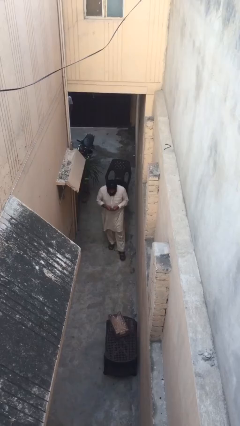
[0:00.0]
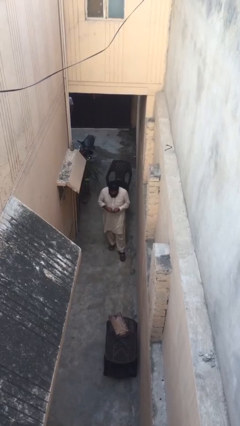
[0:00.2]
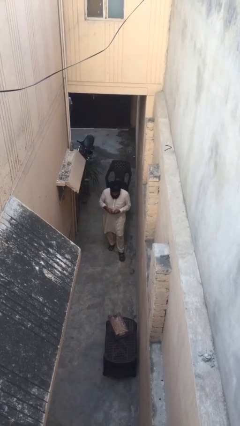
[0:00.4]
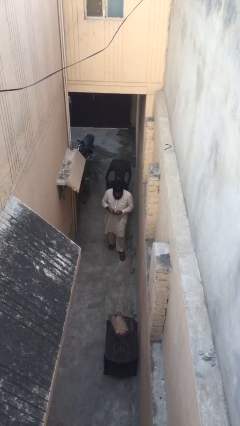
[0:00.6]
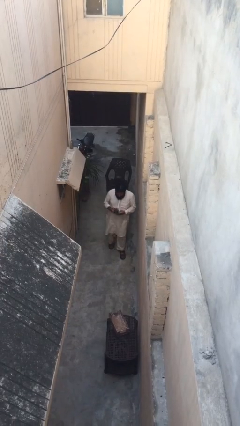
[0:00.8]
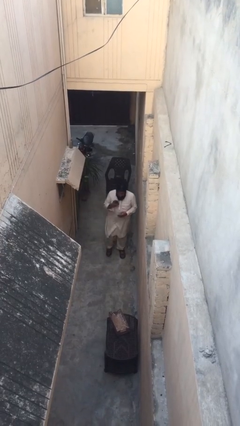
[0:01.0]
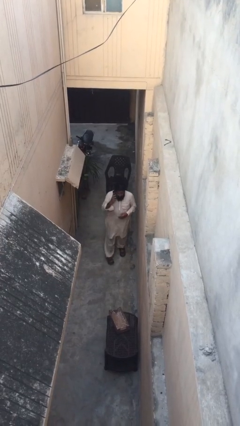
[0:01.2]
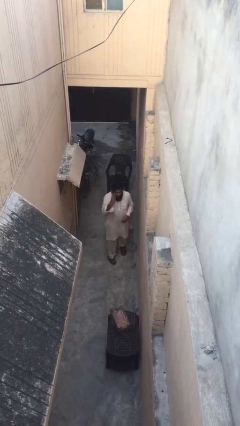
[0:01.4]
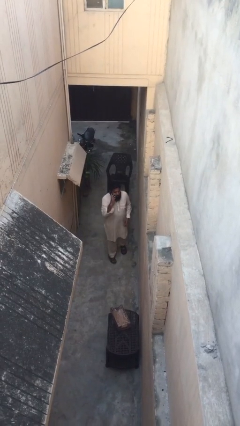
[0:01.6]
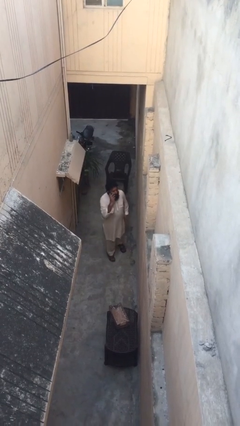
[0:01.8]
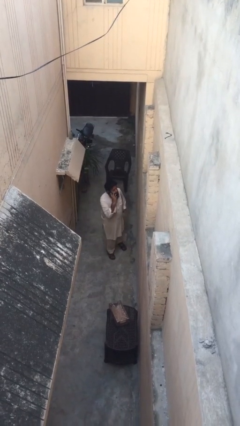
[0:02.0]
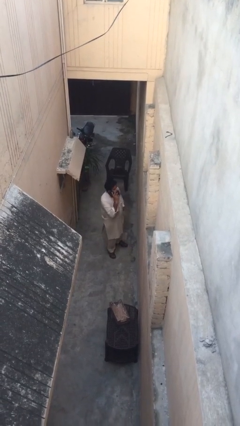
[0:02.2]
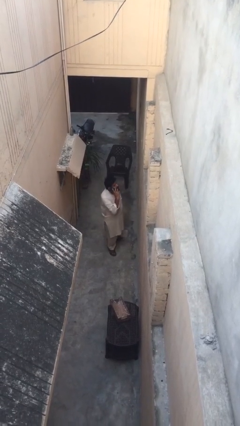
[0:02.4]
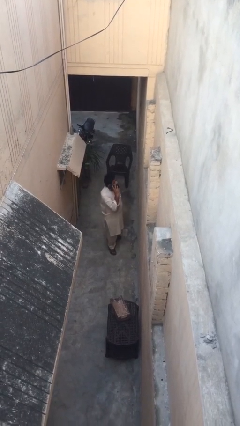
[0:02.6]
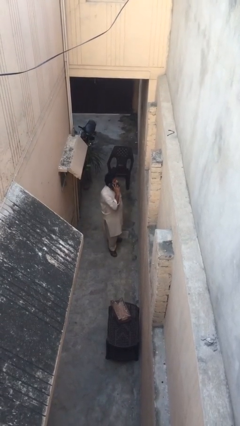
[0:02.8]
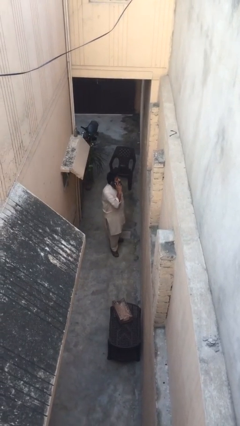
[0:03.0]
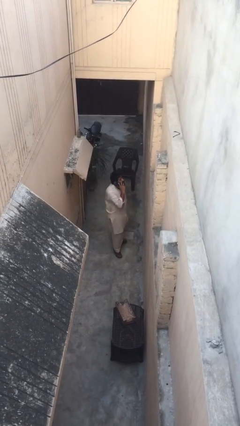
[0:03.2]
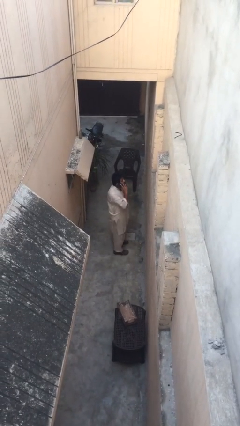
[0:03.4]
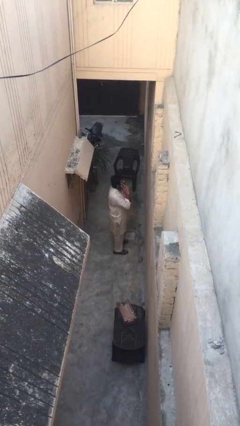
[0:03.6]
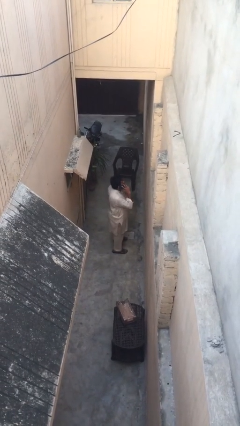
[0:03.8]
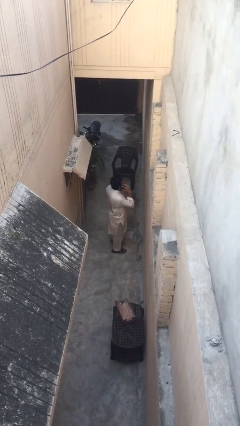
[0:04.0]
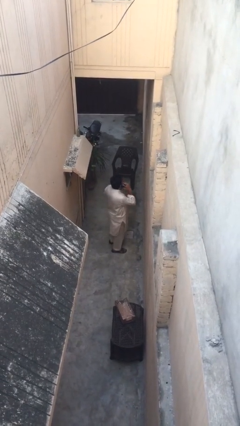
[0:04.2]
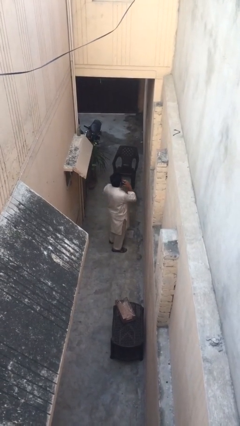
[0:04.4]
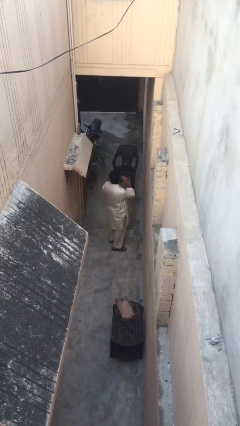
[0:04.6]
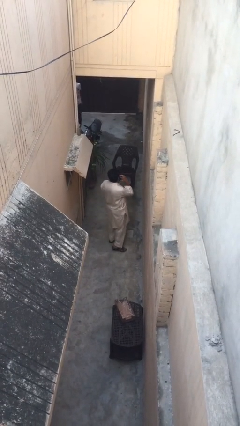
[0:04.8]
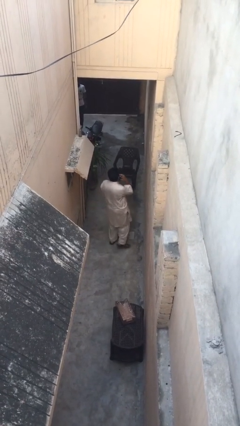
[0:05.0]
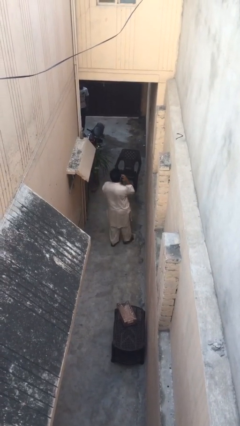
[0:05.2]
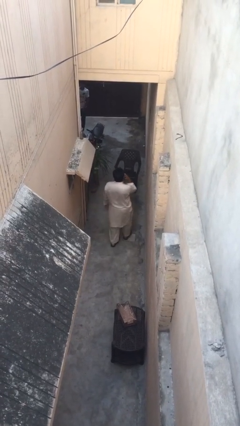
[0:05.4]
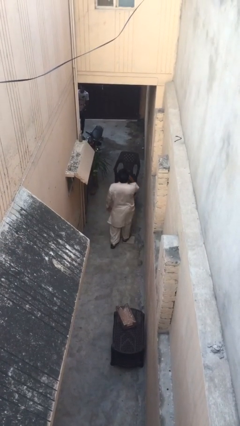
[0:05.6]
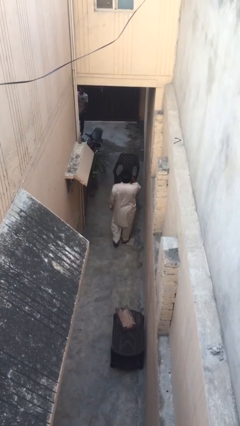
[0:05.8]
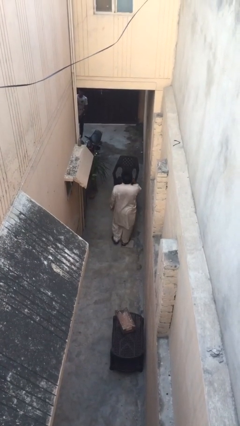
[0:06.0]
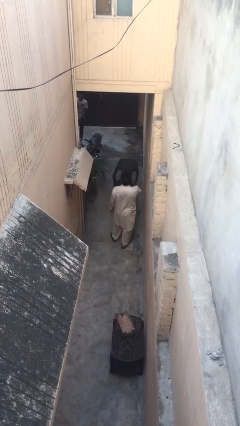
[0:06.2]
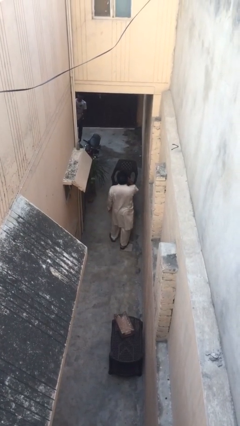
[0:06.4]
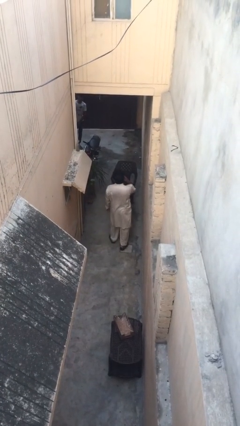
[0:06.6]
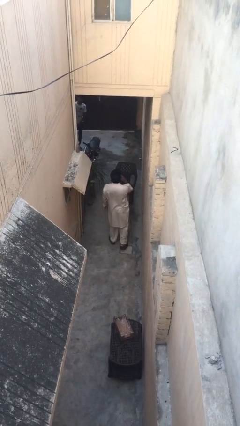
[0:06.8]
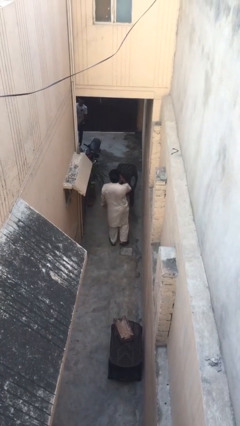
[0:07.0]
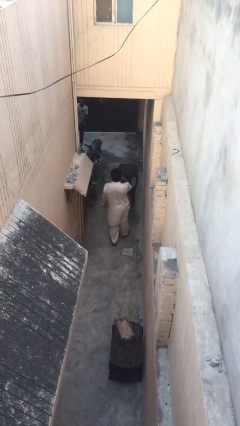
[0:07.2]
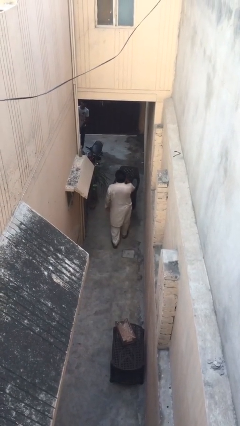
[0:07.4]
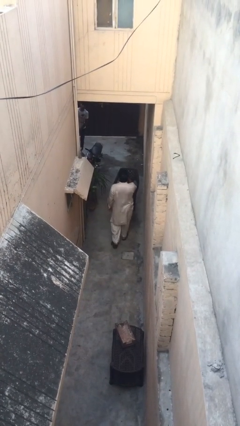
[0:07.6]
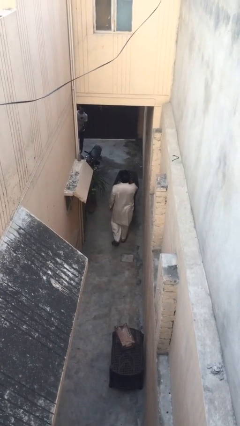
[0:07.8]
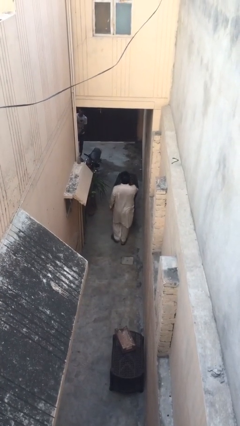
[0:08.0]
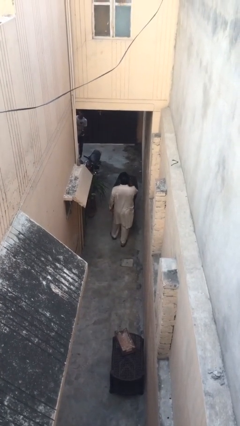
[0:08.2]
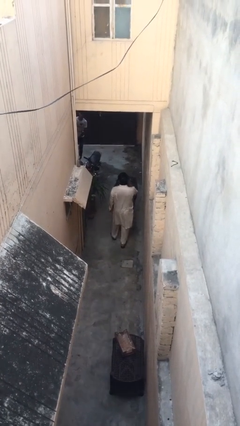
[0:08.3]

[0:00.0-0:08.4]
person talks on phone

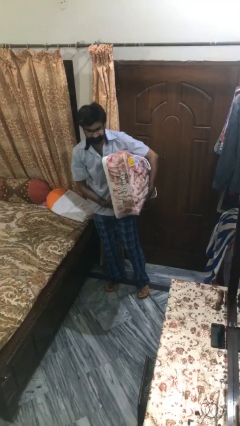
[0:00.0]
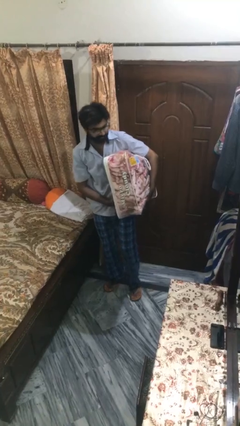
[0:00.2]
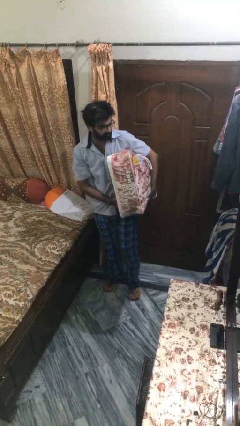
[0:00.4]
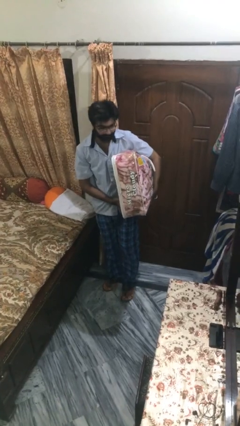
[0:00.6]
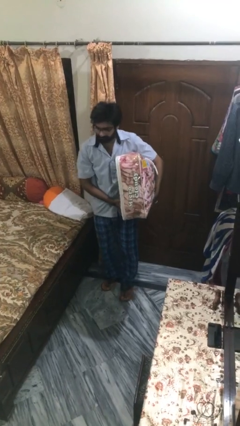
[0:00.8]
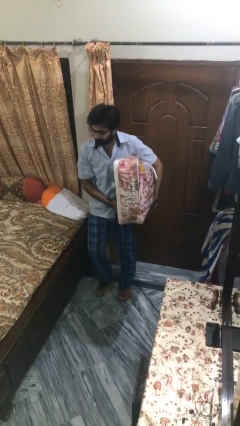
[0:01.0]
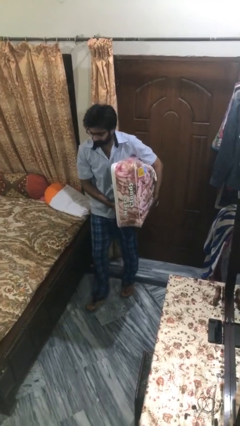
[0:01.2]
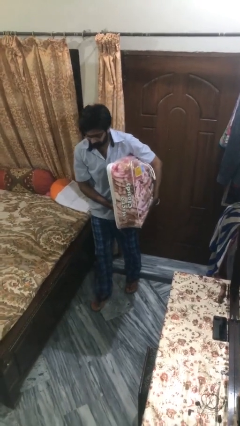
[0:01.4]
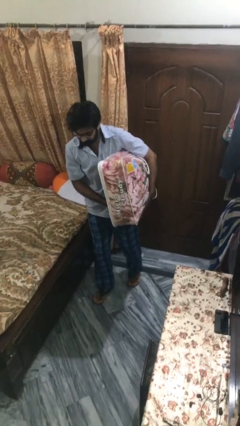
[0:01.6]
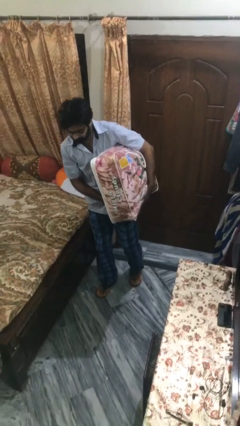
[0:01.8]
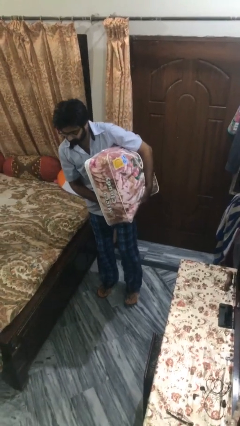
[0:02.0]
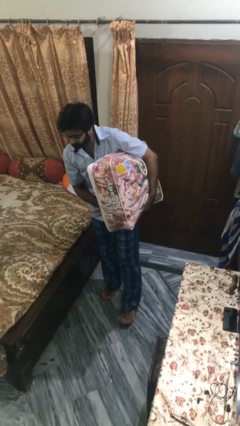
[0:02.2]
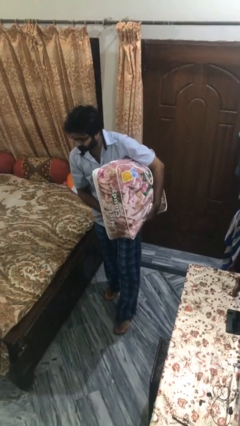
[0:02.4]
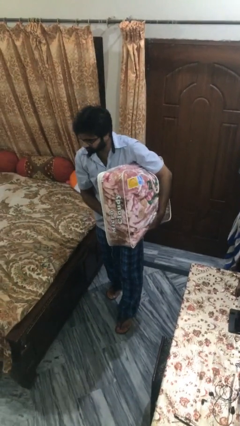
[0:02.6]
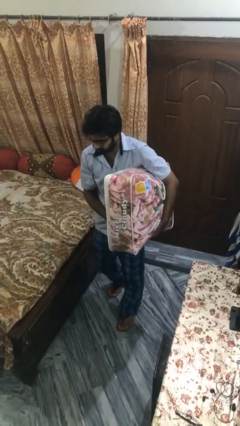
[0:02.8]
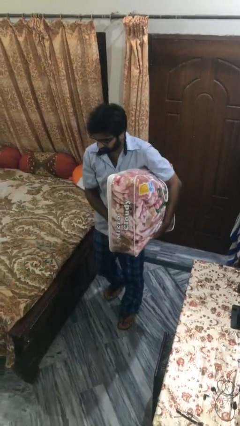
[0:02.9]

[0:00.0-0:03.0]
person carries heavy object

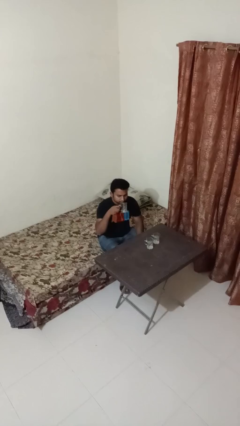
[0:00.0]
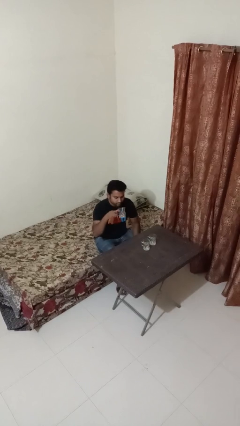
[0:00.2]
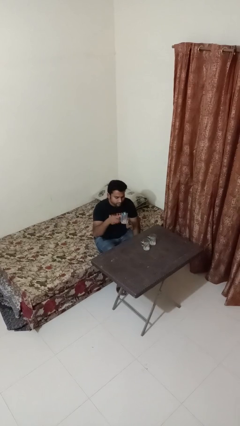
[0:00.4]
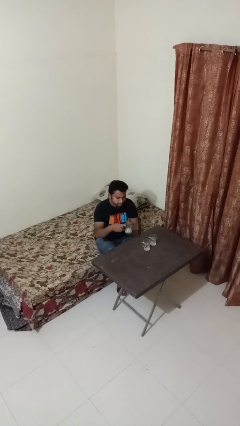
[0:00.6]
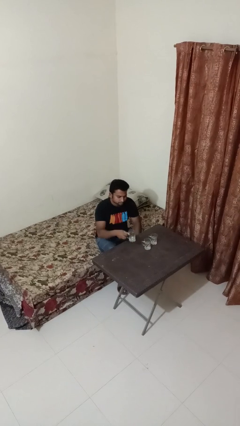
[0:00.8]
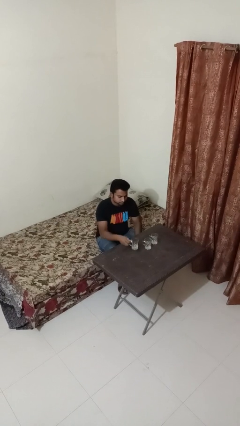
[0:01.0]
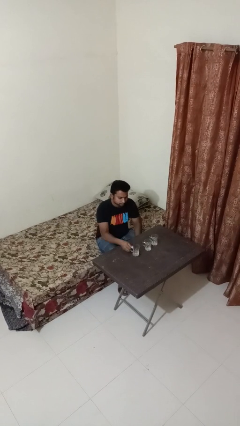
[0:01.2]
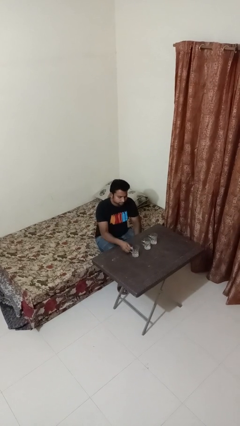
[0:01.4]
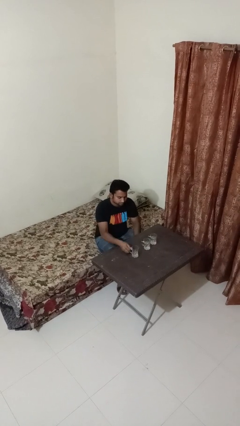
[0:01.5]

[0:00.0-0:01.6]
person puts down object on table

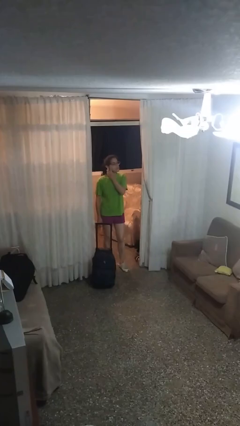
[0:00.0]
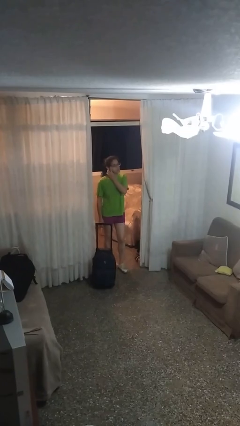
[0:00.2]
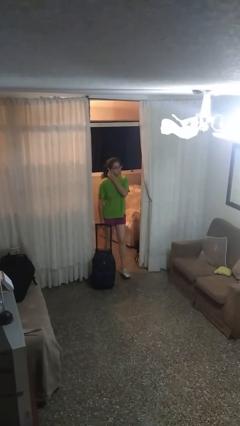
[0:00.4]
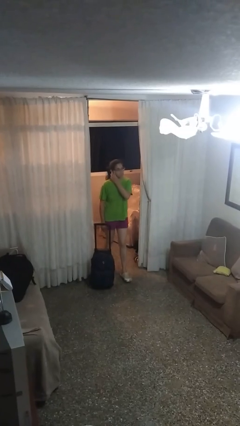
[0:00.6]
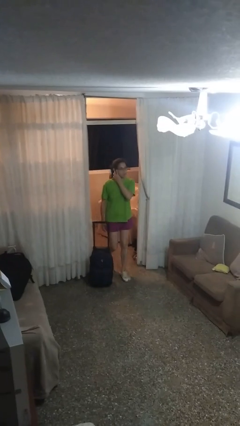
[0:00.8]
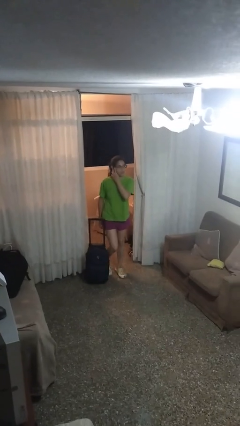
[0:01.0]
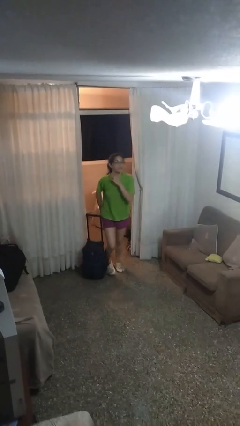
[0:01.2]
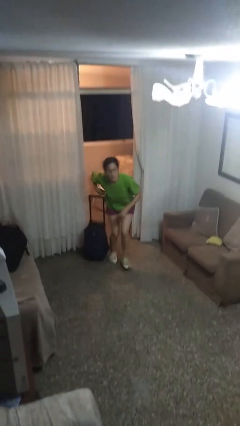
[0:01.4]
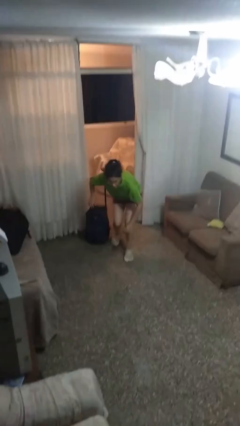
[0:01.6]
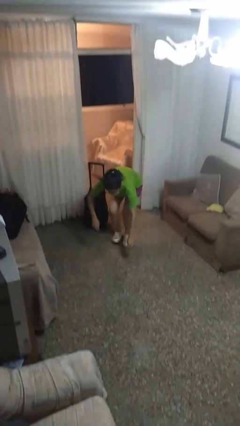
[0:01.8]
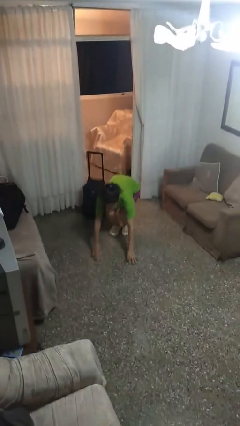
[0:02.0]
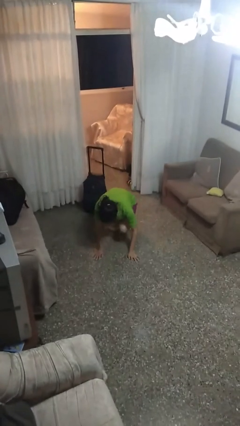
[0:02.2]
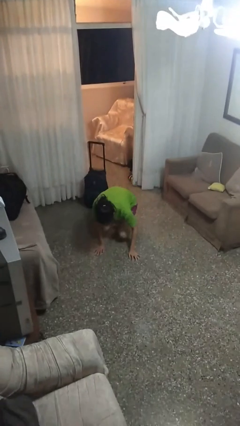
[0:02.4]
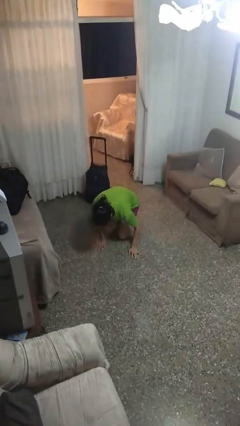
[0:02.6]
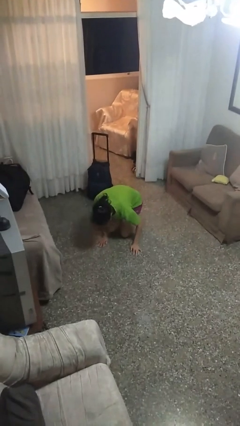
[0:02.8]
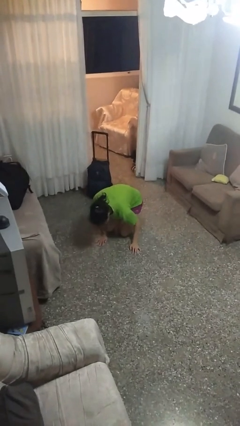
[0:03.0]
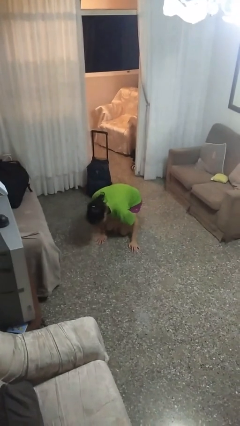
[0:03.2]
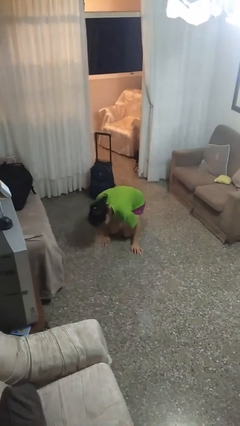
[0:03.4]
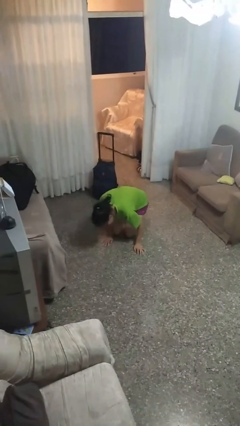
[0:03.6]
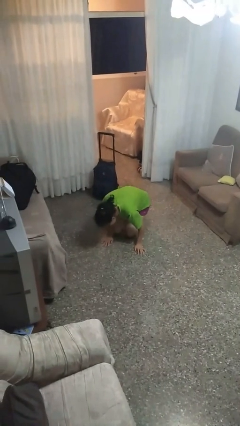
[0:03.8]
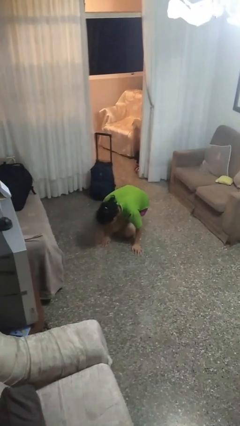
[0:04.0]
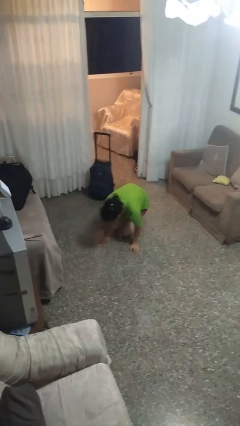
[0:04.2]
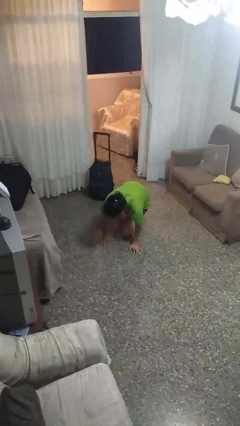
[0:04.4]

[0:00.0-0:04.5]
person trips on object on floor

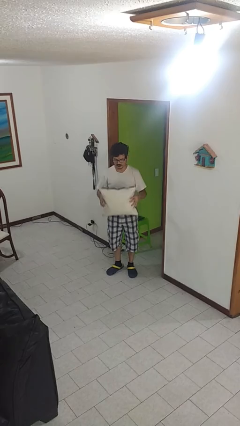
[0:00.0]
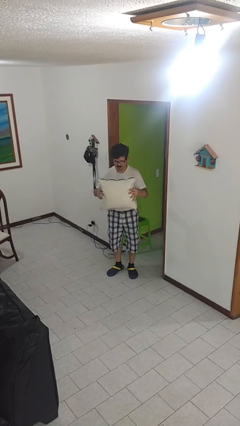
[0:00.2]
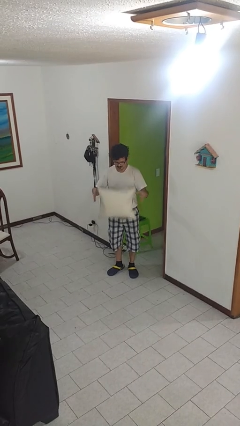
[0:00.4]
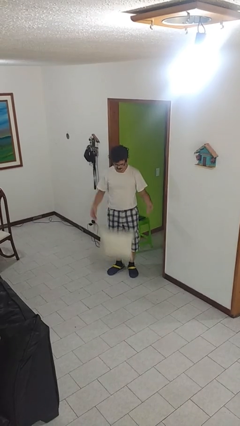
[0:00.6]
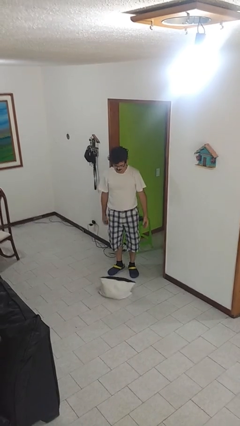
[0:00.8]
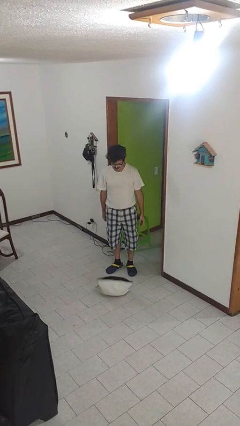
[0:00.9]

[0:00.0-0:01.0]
person throws object into air
